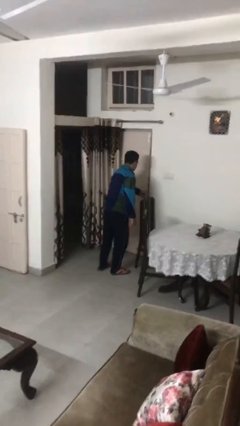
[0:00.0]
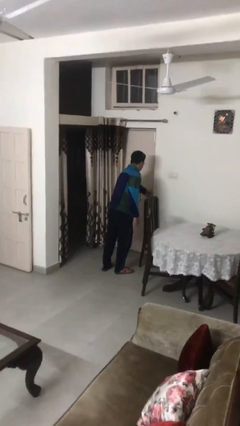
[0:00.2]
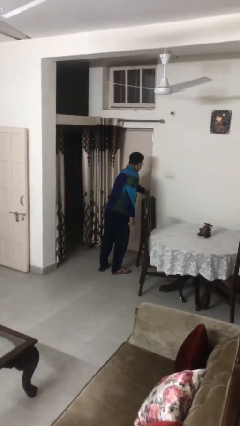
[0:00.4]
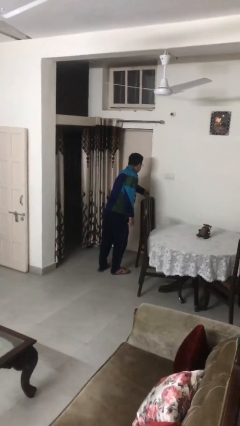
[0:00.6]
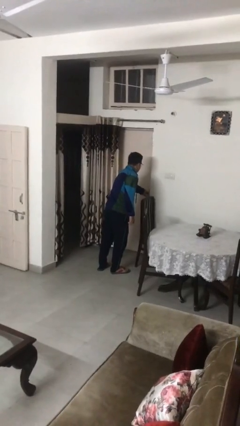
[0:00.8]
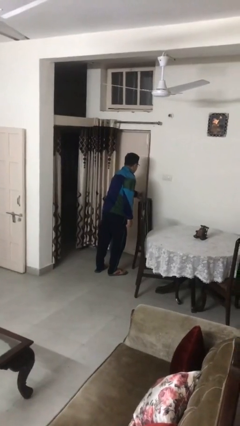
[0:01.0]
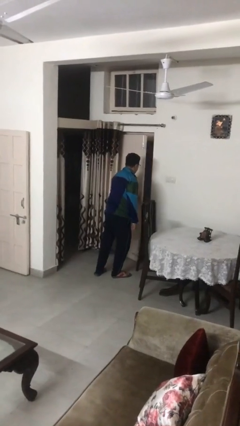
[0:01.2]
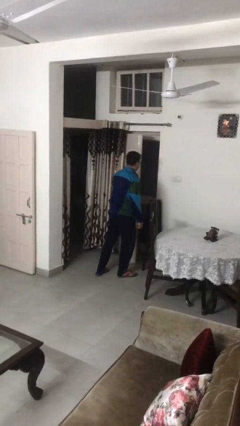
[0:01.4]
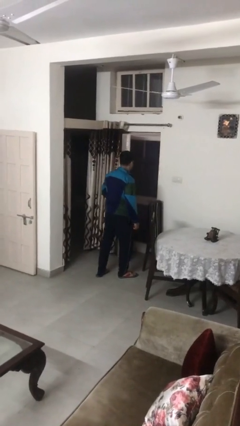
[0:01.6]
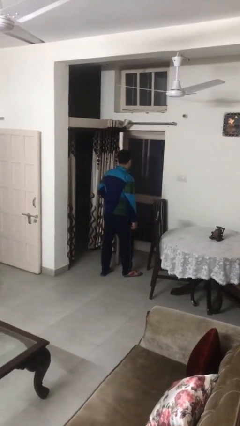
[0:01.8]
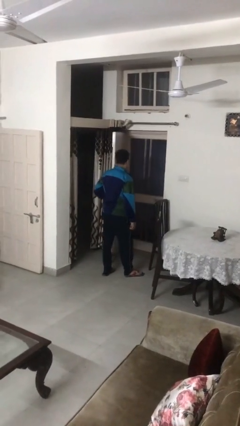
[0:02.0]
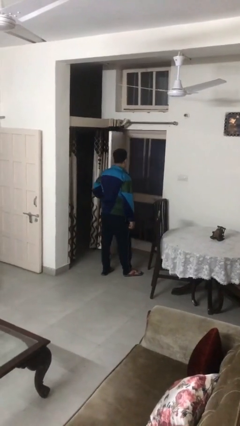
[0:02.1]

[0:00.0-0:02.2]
person opens facility door

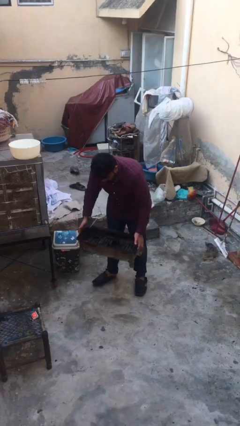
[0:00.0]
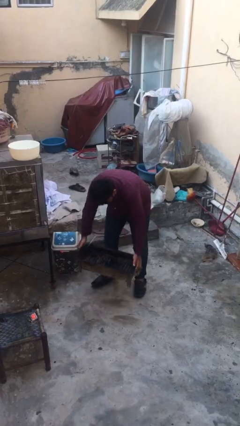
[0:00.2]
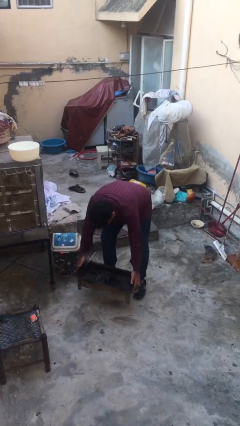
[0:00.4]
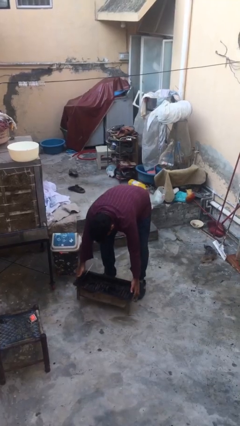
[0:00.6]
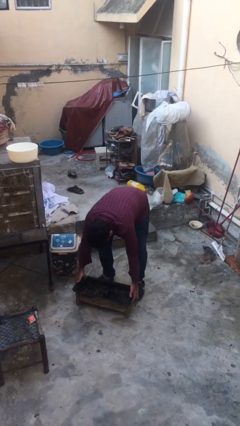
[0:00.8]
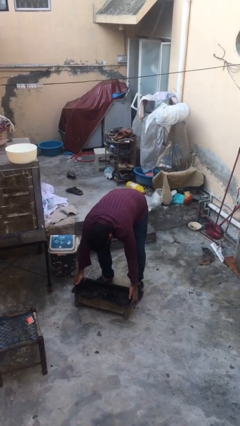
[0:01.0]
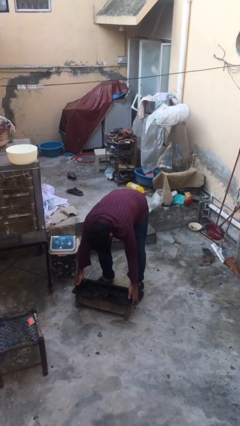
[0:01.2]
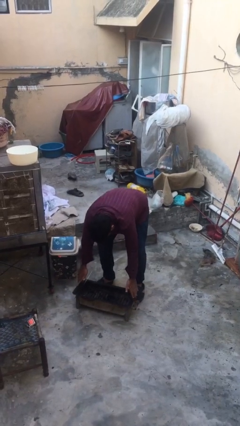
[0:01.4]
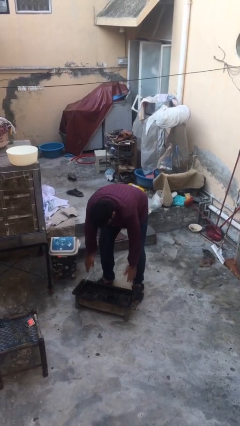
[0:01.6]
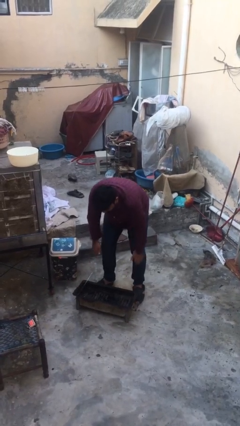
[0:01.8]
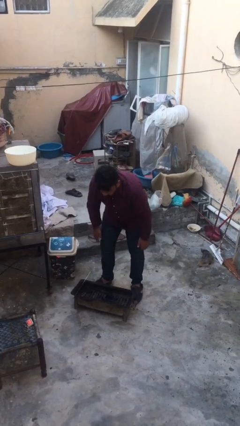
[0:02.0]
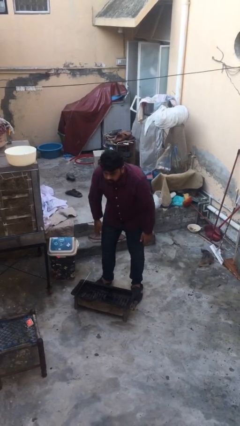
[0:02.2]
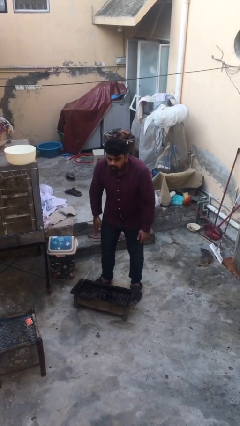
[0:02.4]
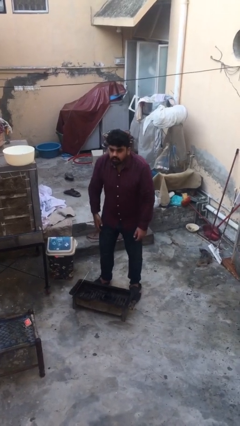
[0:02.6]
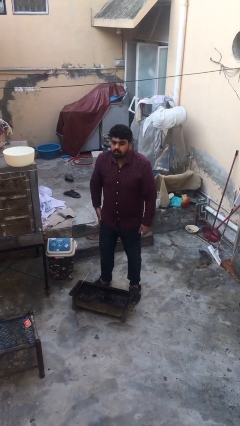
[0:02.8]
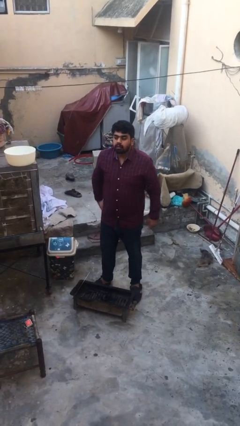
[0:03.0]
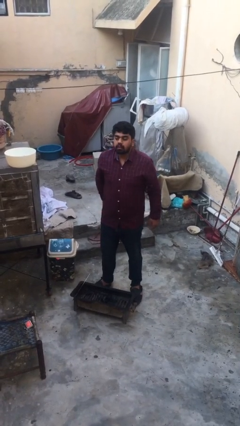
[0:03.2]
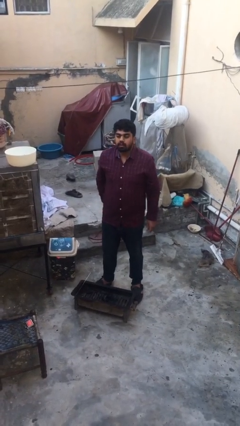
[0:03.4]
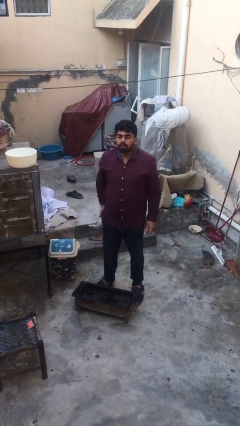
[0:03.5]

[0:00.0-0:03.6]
person puts down object on floor

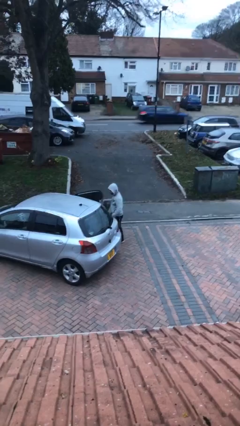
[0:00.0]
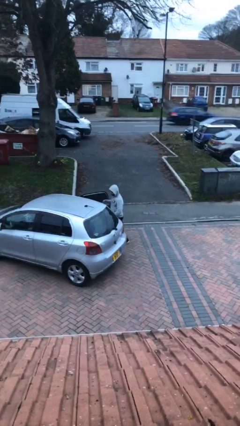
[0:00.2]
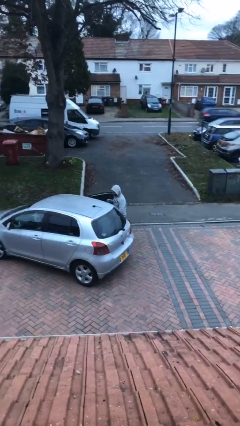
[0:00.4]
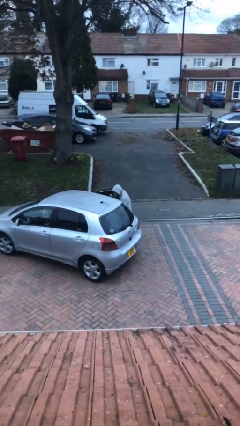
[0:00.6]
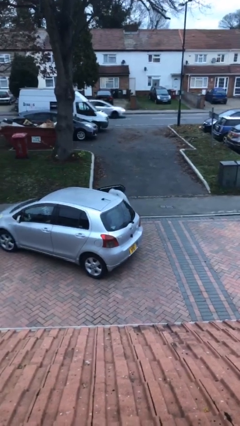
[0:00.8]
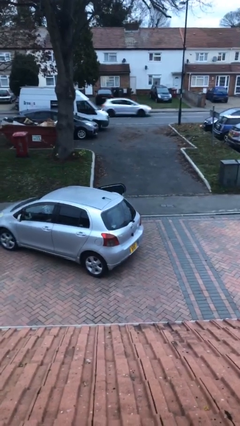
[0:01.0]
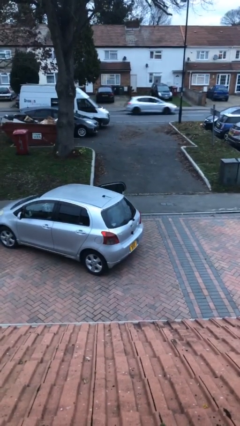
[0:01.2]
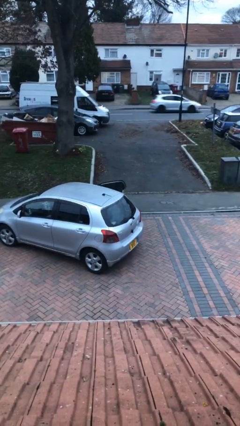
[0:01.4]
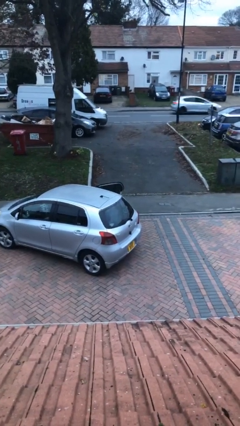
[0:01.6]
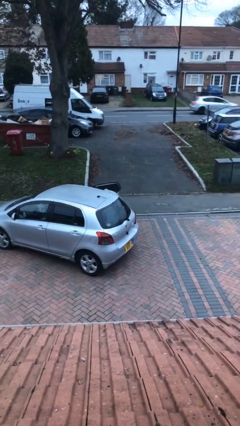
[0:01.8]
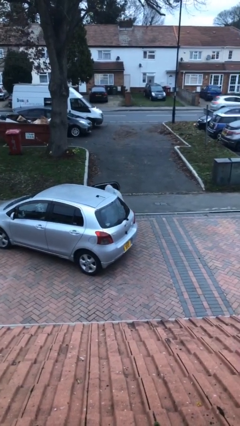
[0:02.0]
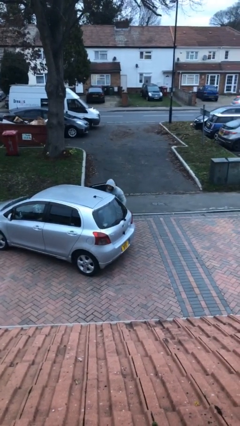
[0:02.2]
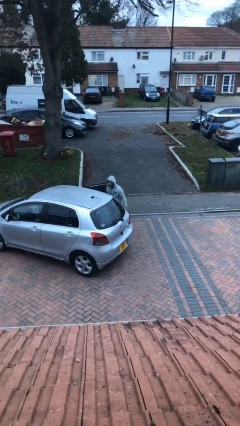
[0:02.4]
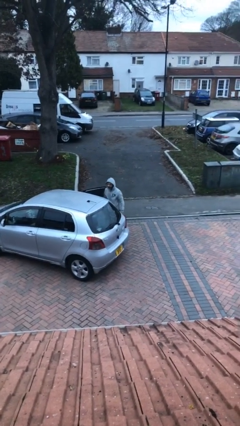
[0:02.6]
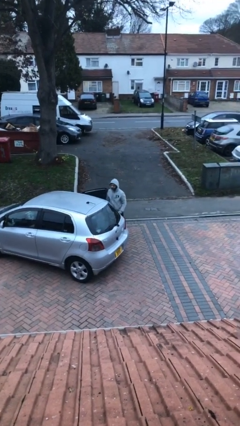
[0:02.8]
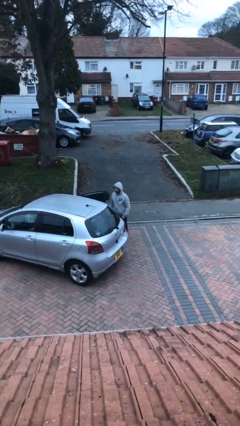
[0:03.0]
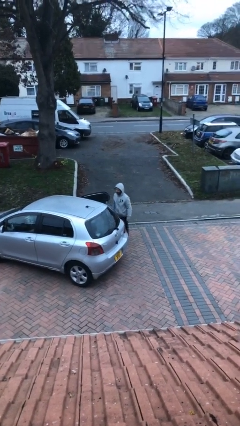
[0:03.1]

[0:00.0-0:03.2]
person loads car

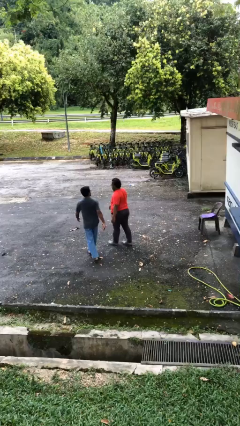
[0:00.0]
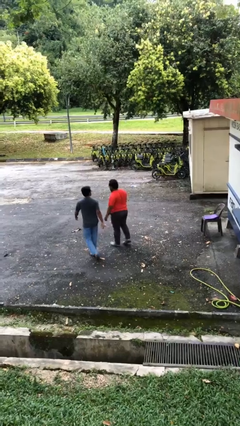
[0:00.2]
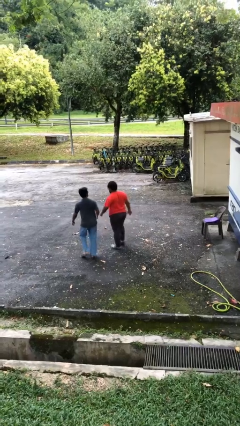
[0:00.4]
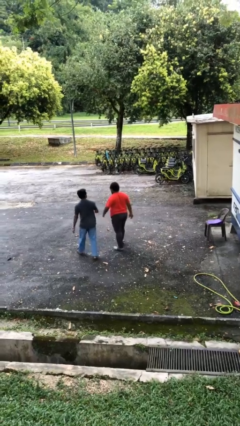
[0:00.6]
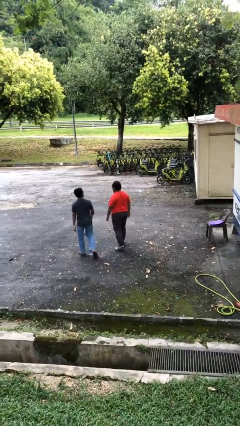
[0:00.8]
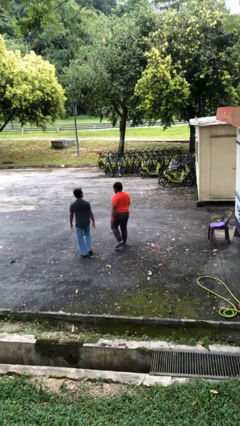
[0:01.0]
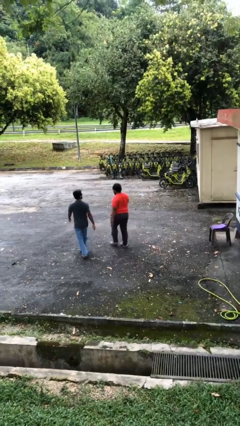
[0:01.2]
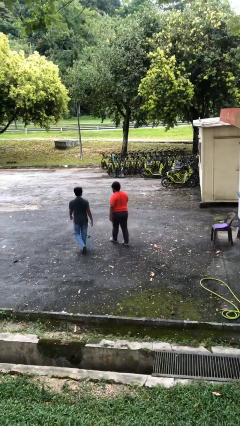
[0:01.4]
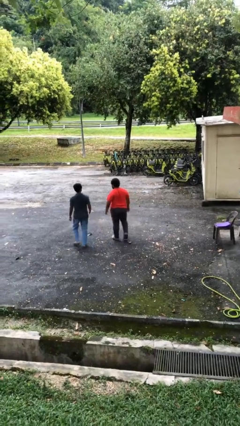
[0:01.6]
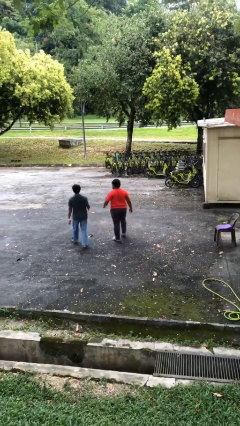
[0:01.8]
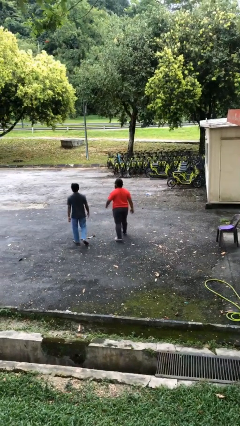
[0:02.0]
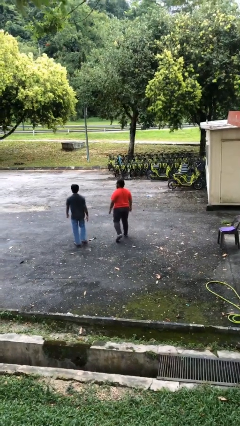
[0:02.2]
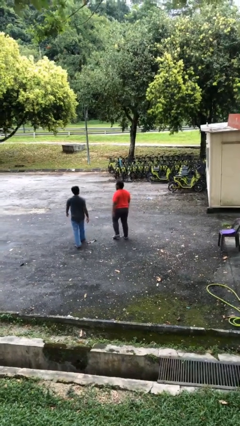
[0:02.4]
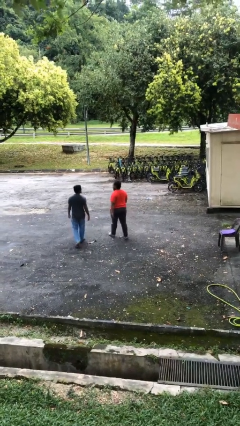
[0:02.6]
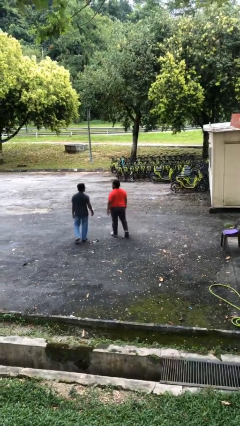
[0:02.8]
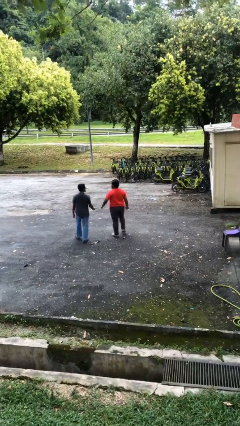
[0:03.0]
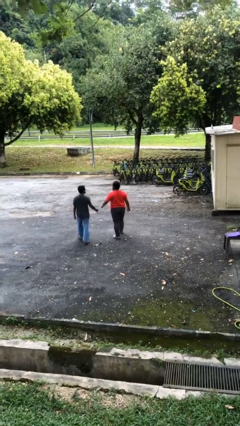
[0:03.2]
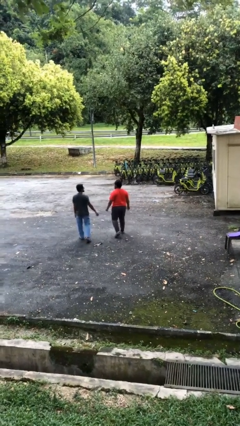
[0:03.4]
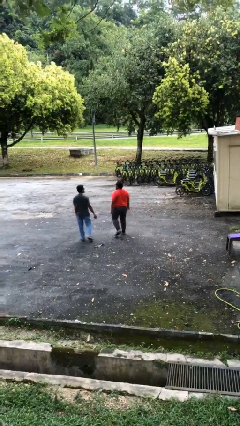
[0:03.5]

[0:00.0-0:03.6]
person talks to person

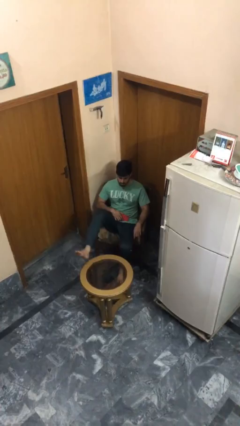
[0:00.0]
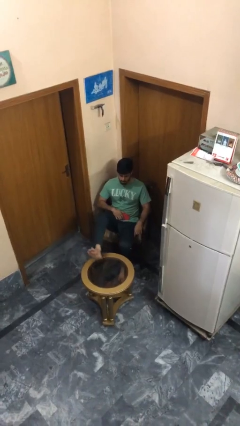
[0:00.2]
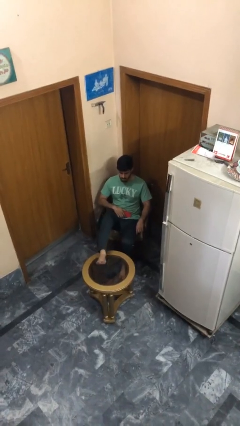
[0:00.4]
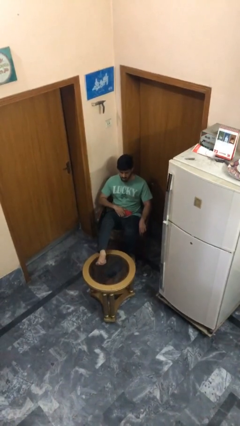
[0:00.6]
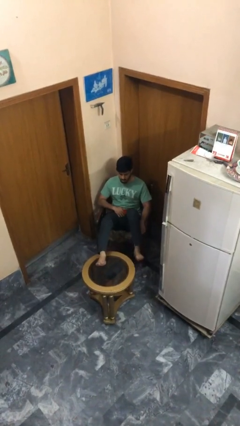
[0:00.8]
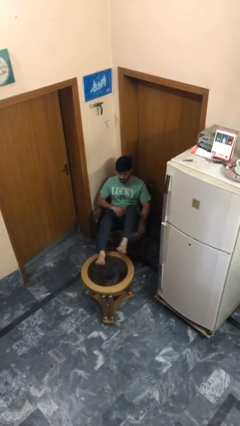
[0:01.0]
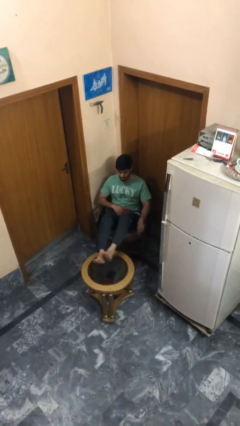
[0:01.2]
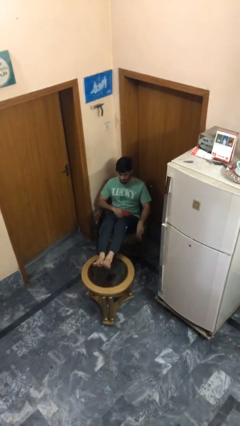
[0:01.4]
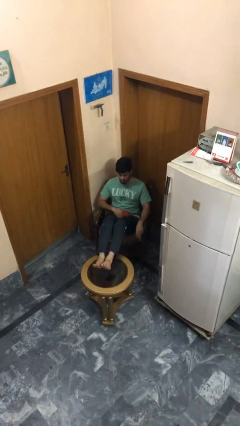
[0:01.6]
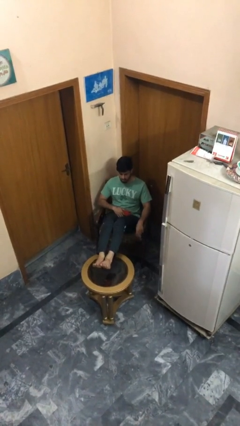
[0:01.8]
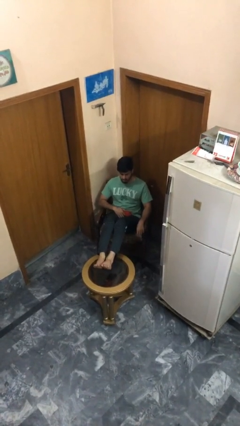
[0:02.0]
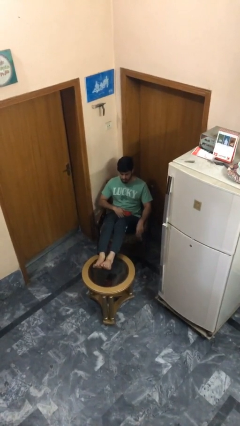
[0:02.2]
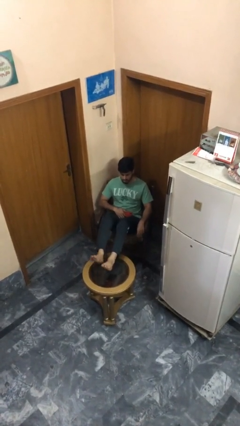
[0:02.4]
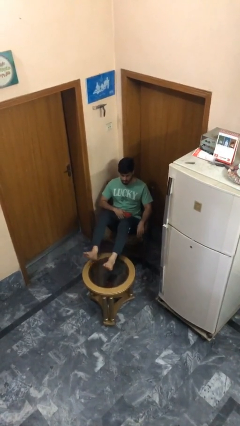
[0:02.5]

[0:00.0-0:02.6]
person puts feet up

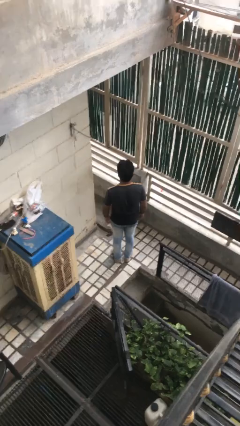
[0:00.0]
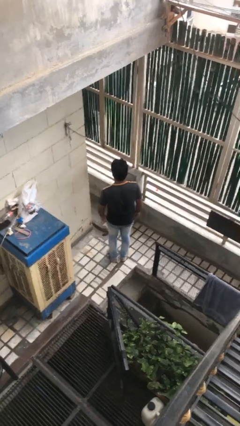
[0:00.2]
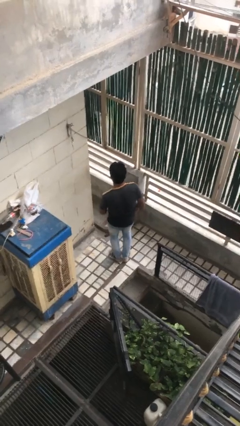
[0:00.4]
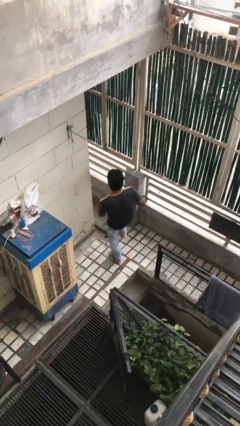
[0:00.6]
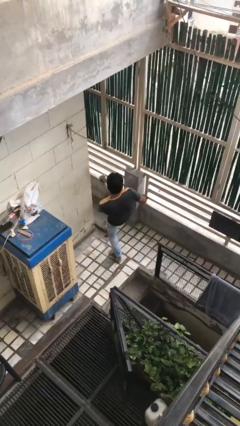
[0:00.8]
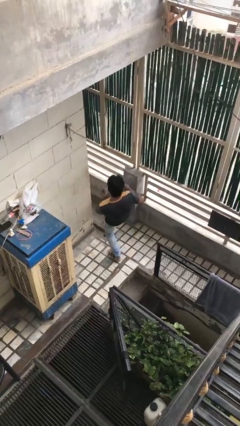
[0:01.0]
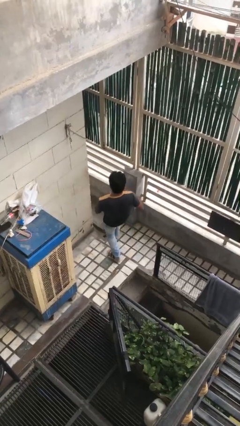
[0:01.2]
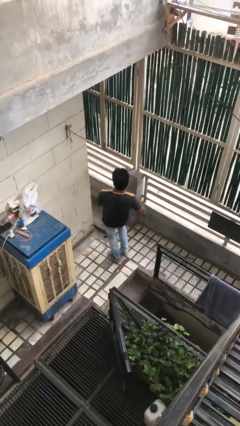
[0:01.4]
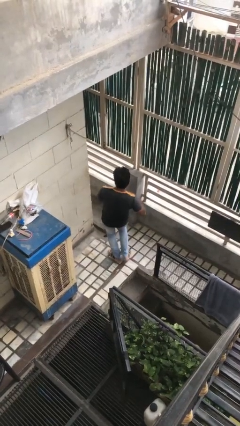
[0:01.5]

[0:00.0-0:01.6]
person karate kicks

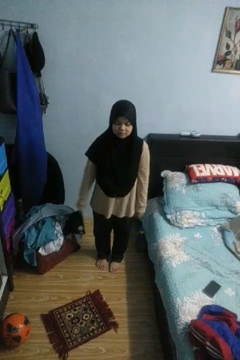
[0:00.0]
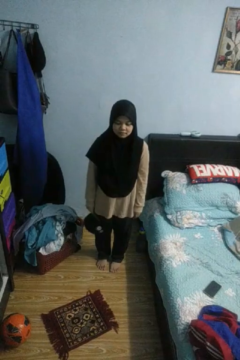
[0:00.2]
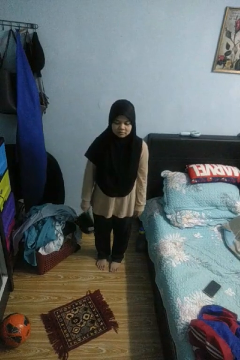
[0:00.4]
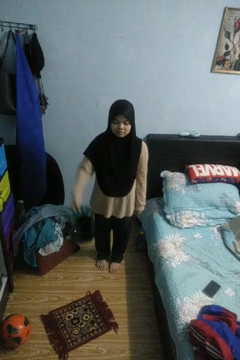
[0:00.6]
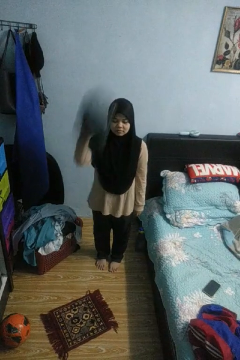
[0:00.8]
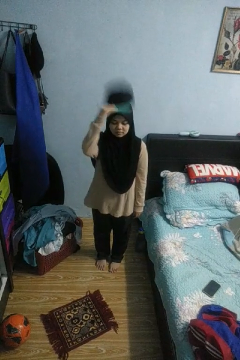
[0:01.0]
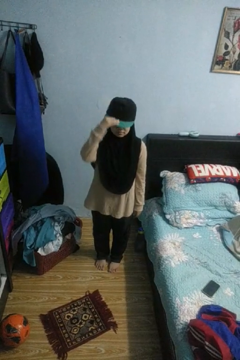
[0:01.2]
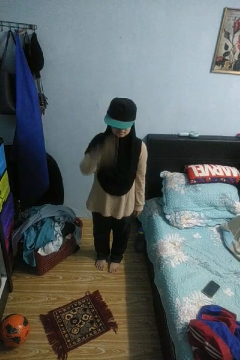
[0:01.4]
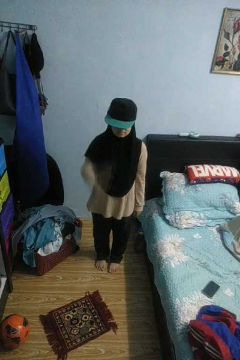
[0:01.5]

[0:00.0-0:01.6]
person puts on hat
